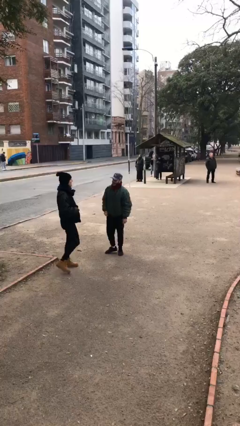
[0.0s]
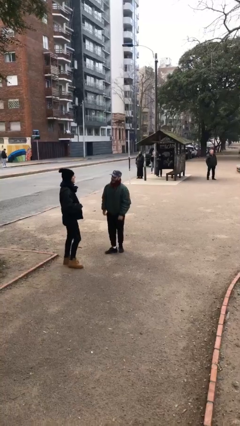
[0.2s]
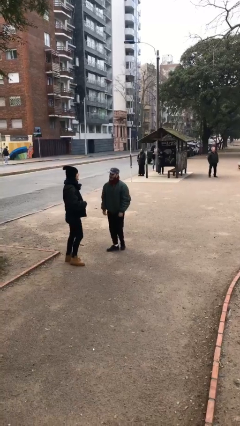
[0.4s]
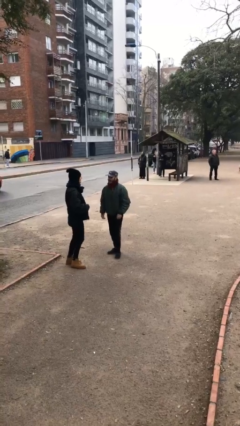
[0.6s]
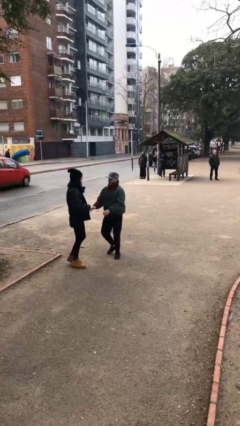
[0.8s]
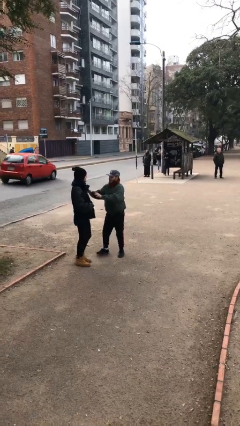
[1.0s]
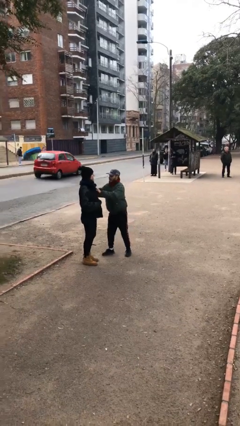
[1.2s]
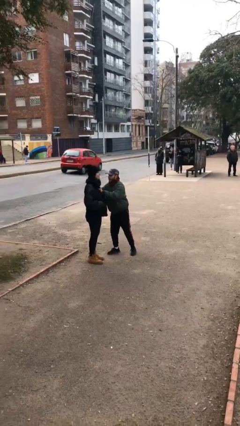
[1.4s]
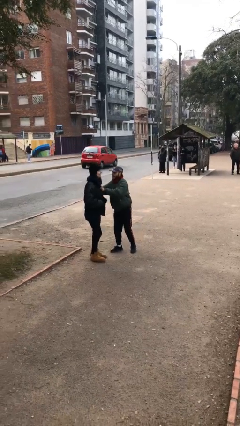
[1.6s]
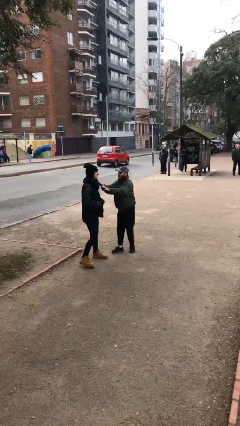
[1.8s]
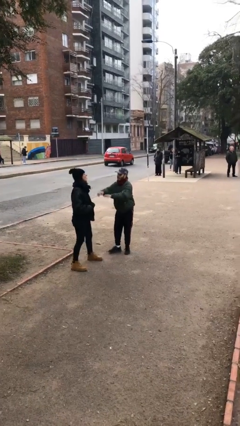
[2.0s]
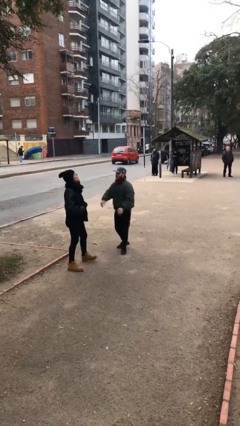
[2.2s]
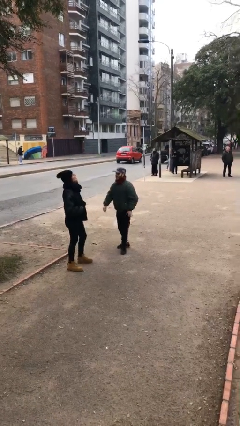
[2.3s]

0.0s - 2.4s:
person shoves person

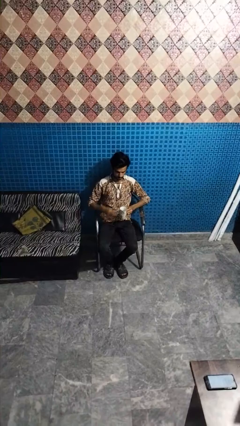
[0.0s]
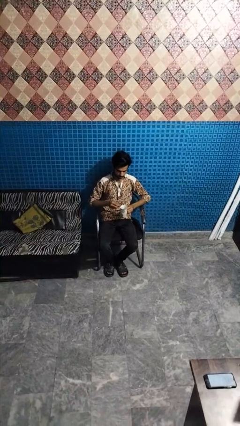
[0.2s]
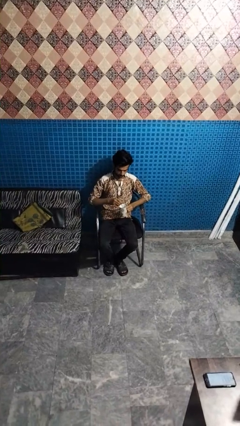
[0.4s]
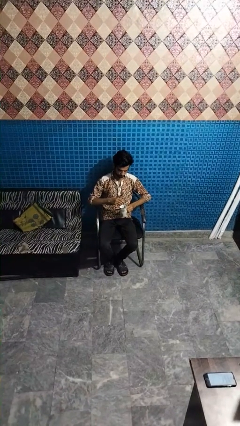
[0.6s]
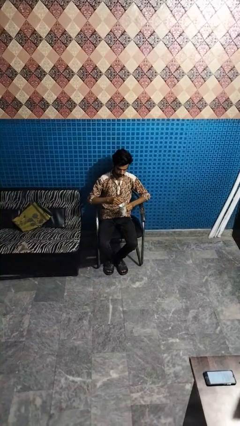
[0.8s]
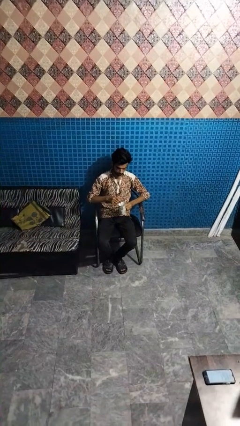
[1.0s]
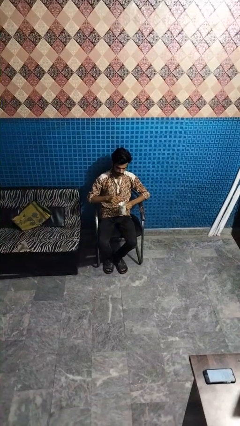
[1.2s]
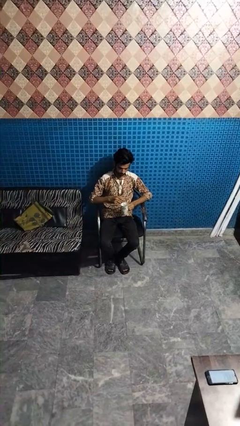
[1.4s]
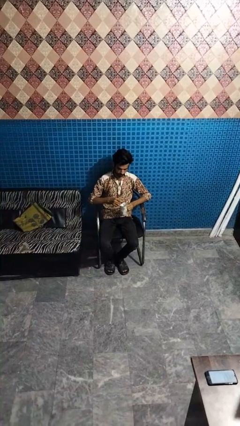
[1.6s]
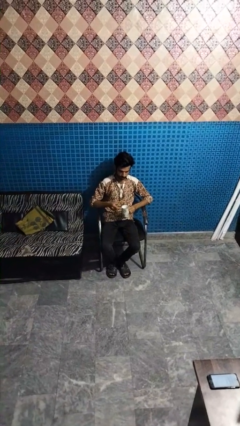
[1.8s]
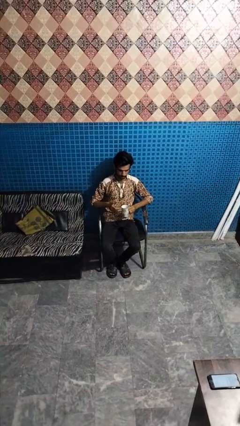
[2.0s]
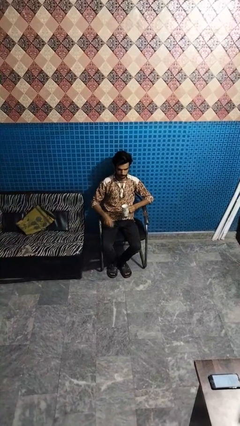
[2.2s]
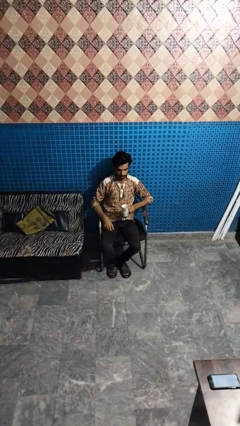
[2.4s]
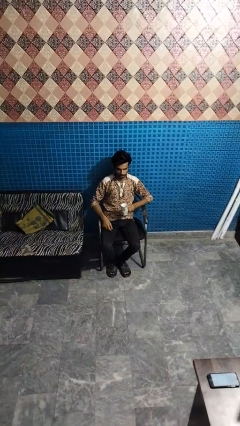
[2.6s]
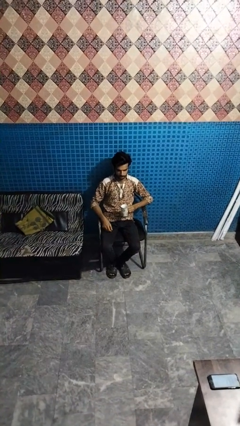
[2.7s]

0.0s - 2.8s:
person stirs mug

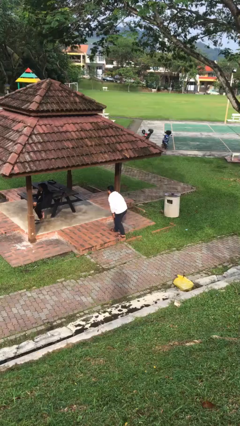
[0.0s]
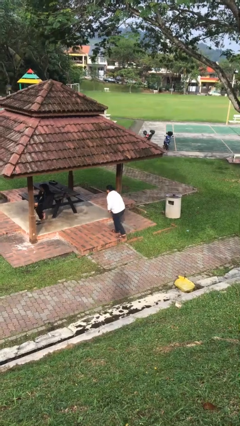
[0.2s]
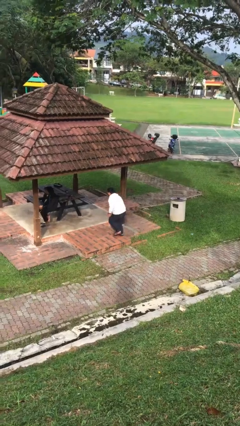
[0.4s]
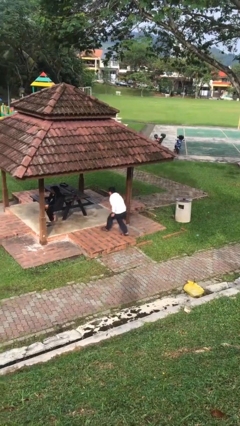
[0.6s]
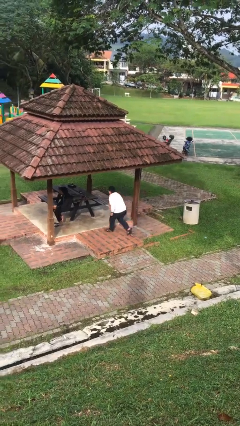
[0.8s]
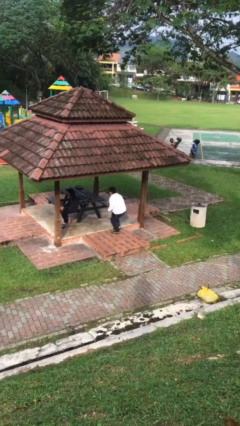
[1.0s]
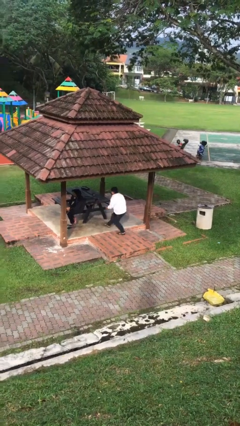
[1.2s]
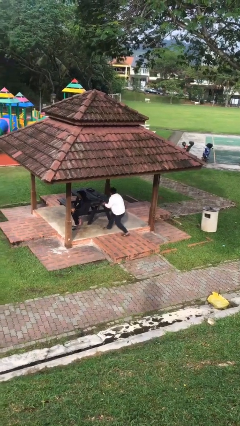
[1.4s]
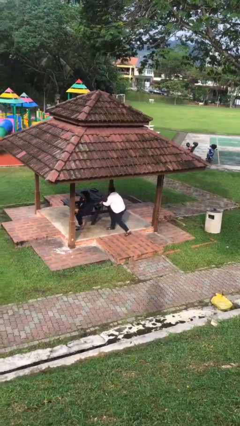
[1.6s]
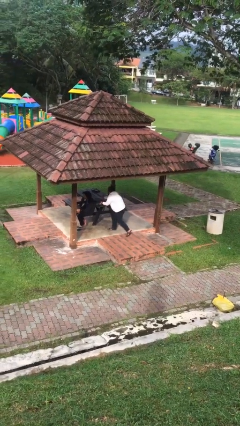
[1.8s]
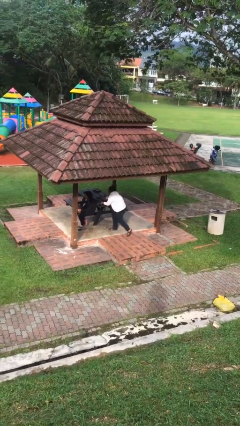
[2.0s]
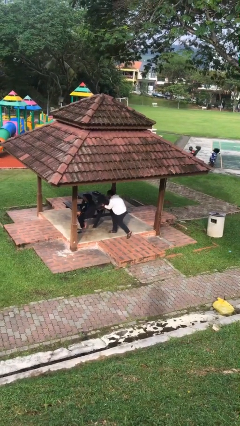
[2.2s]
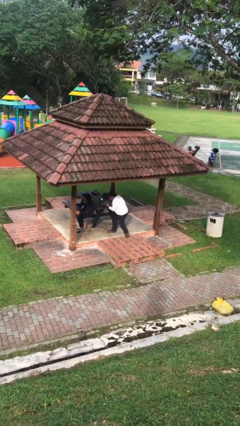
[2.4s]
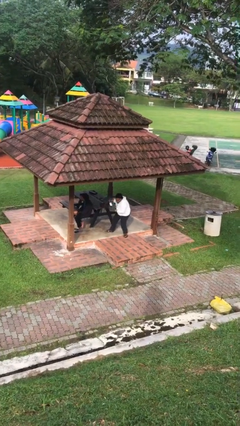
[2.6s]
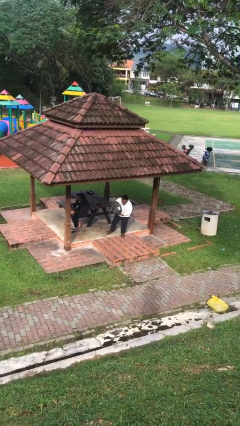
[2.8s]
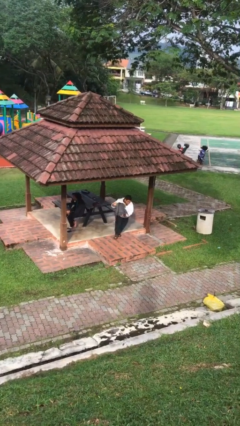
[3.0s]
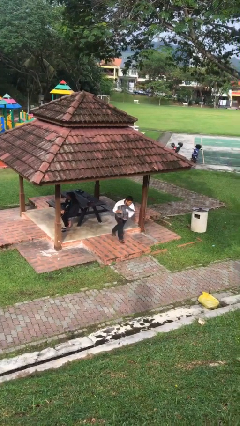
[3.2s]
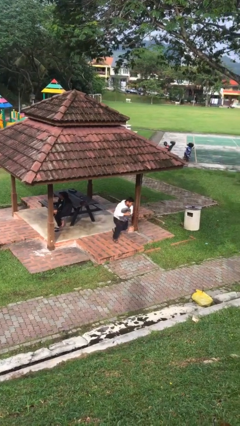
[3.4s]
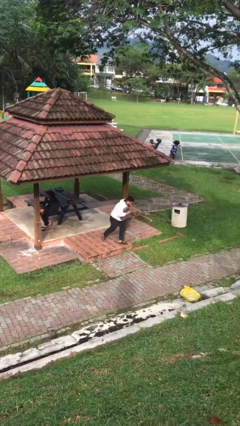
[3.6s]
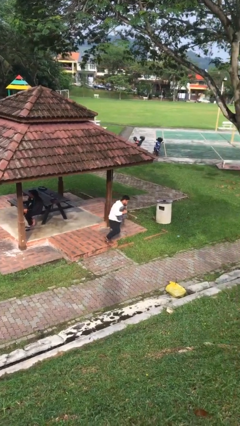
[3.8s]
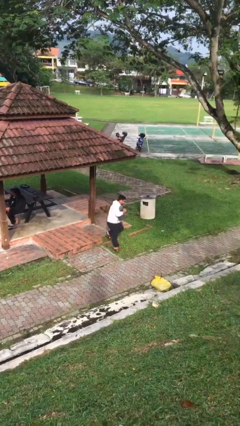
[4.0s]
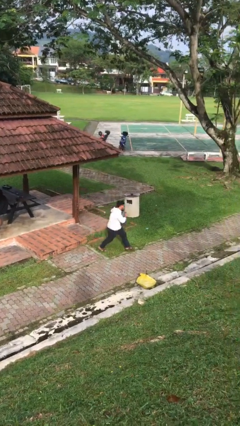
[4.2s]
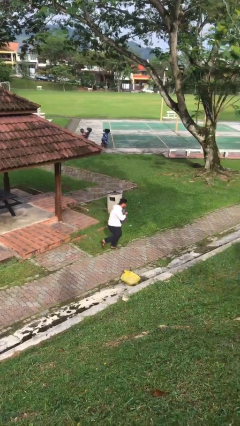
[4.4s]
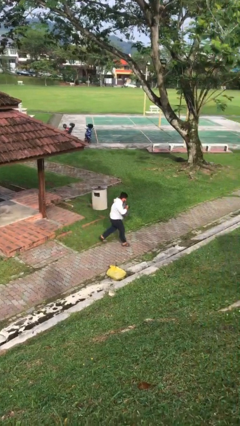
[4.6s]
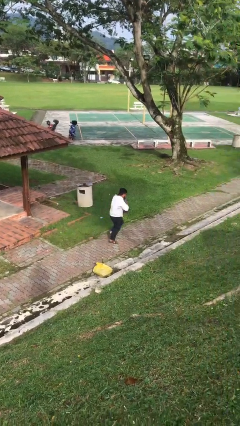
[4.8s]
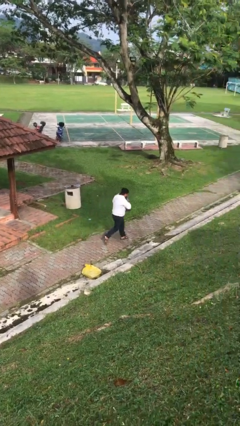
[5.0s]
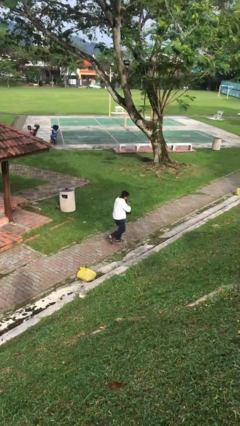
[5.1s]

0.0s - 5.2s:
person steals object from person

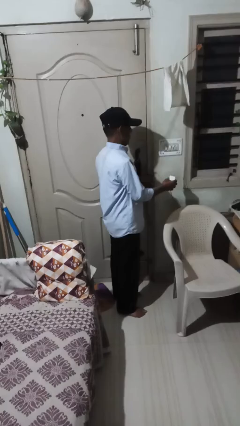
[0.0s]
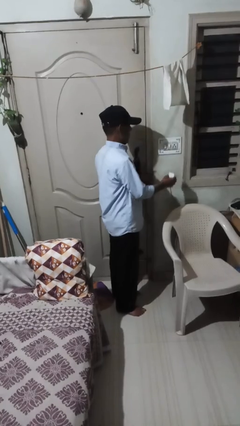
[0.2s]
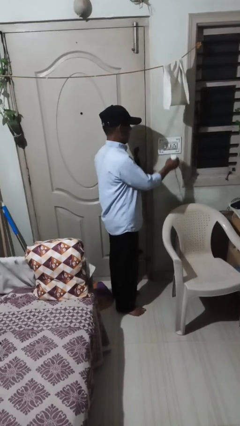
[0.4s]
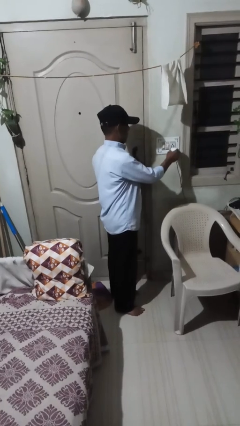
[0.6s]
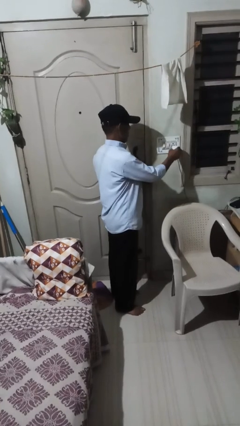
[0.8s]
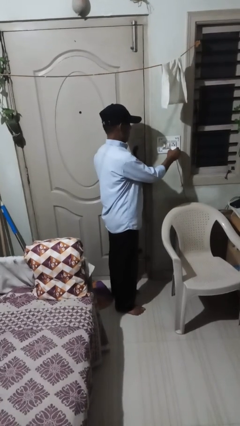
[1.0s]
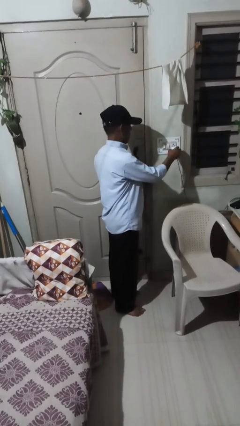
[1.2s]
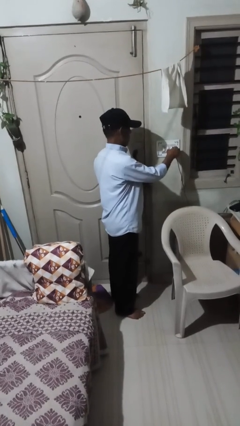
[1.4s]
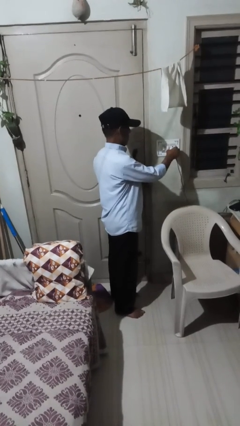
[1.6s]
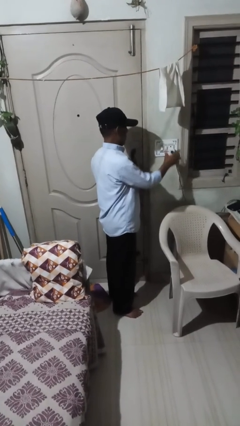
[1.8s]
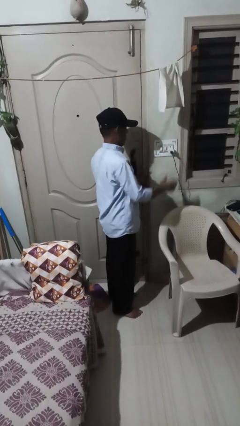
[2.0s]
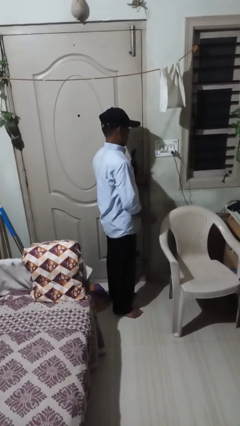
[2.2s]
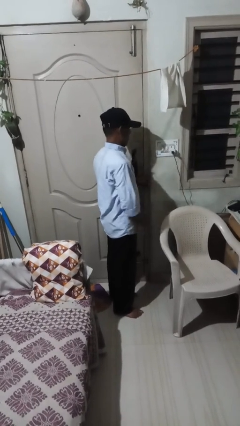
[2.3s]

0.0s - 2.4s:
person plugs into electrical socket

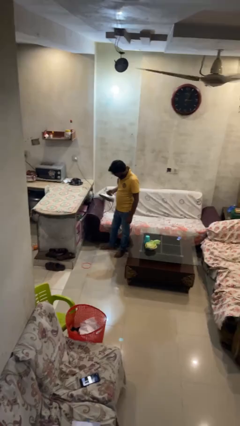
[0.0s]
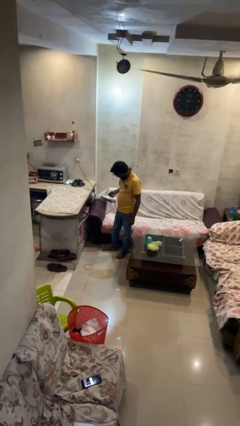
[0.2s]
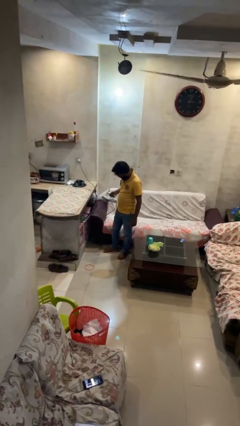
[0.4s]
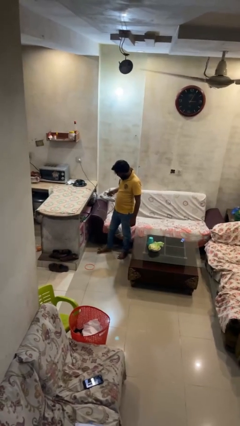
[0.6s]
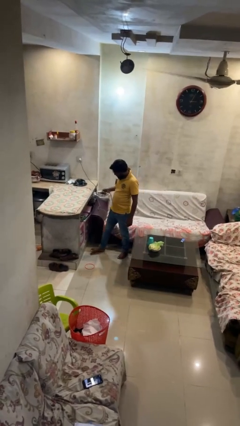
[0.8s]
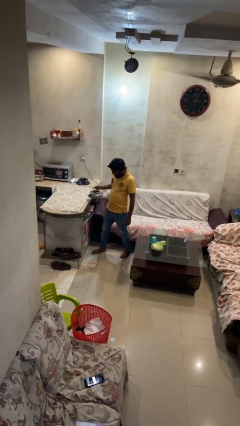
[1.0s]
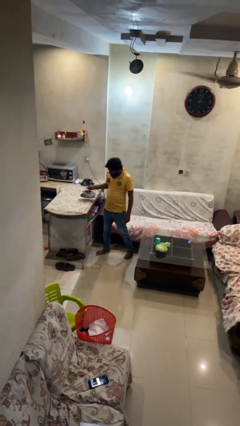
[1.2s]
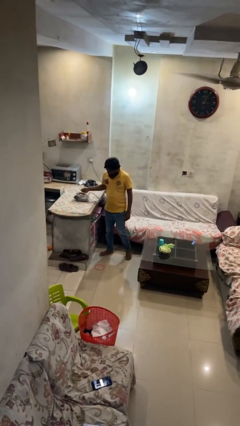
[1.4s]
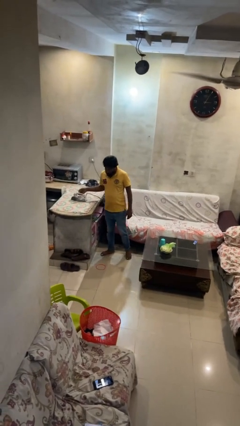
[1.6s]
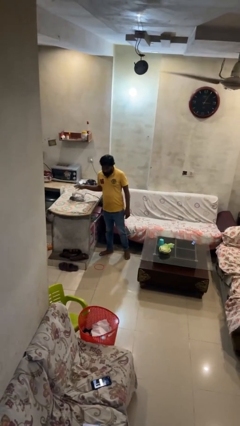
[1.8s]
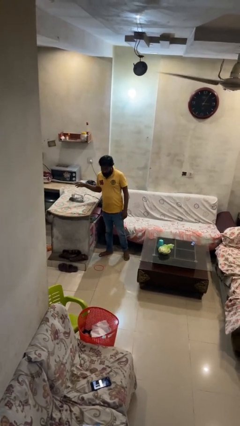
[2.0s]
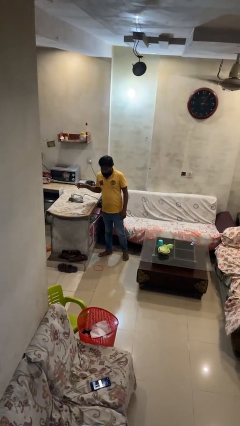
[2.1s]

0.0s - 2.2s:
person puts down object on countertop

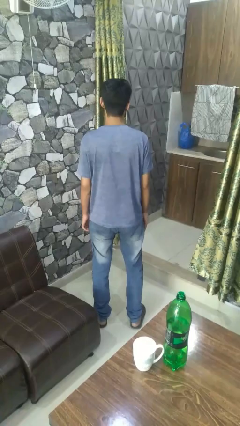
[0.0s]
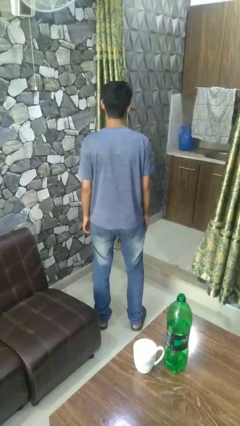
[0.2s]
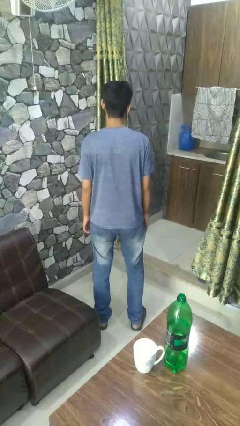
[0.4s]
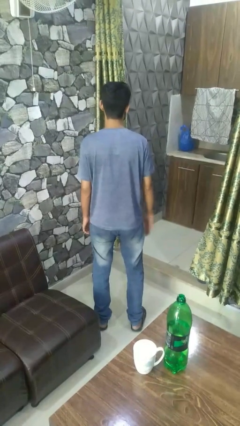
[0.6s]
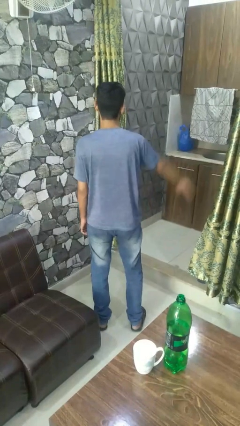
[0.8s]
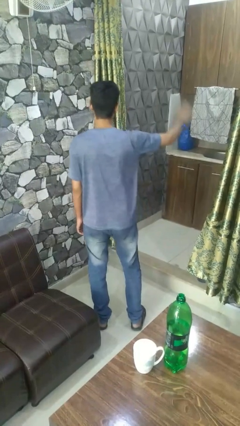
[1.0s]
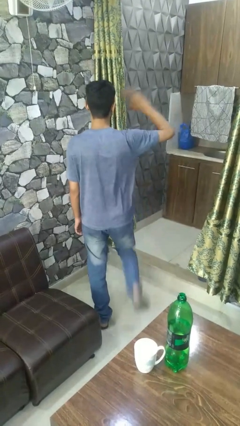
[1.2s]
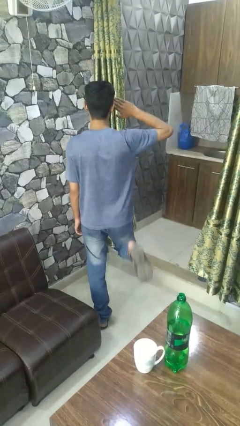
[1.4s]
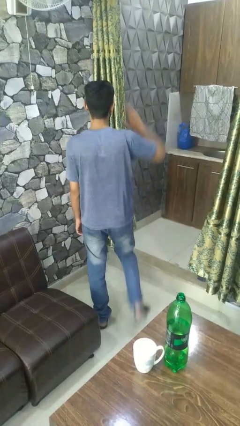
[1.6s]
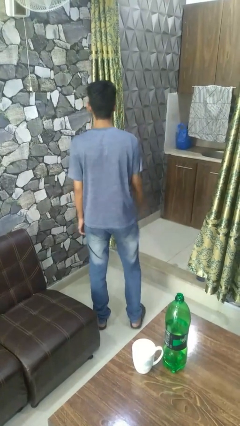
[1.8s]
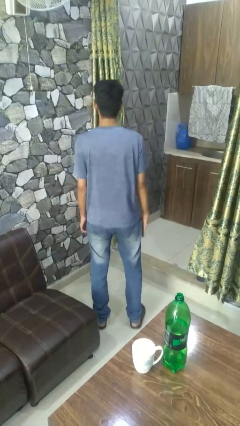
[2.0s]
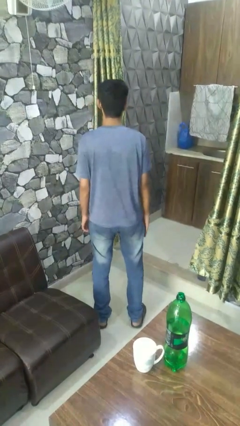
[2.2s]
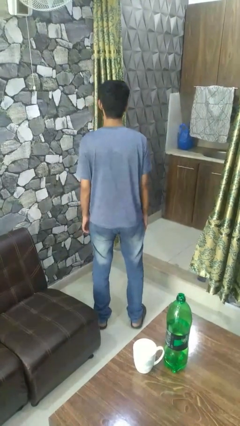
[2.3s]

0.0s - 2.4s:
person salutes
